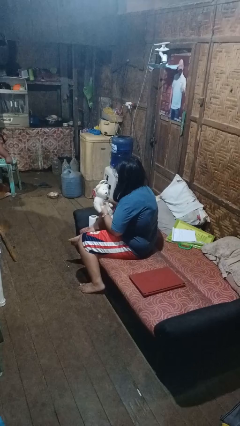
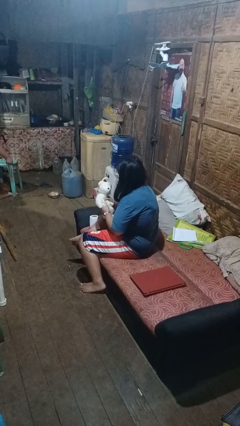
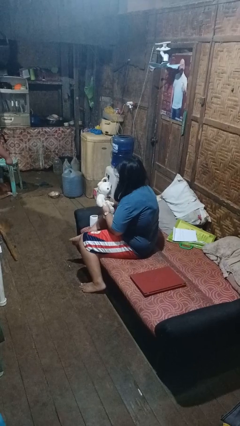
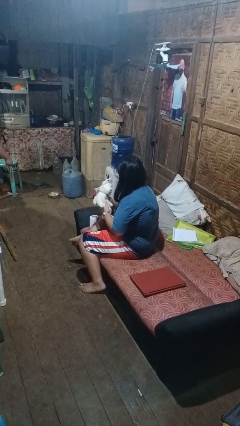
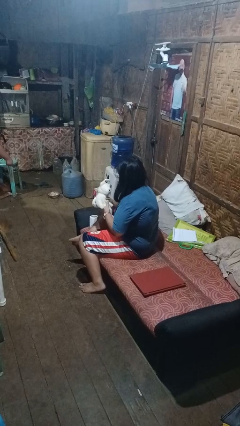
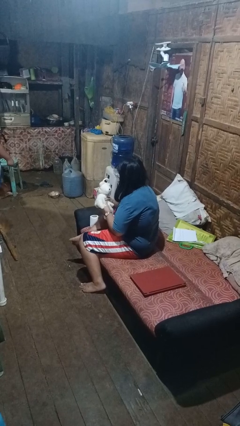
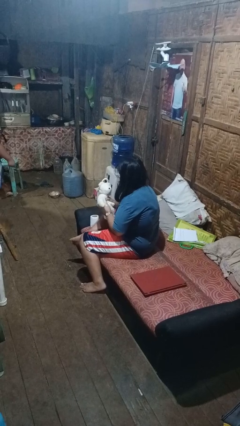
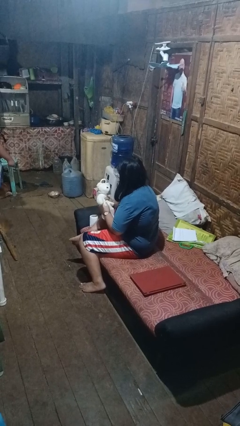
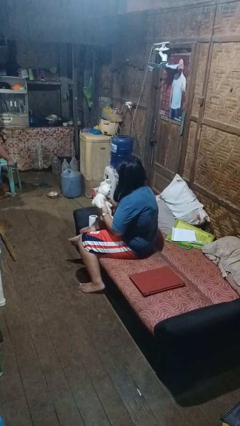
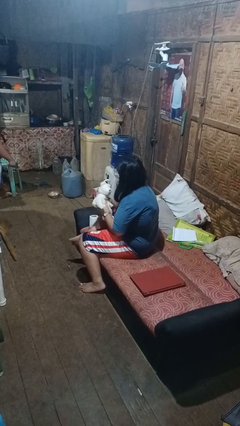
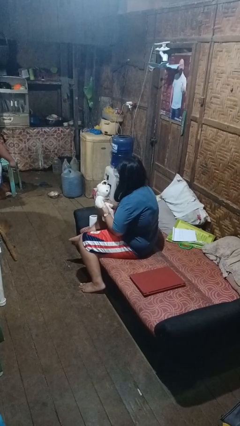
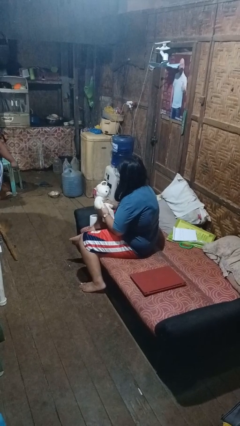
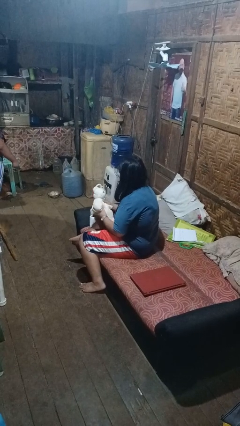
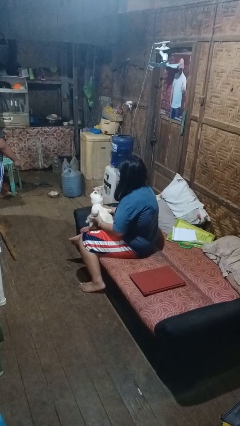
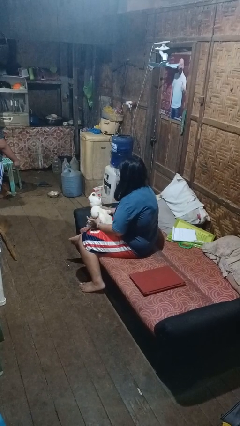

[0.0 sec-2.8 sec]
person squeezes object

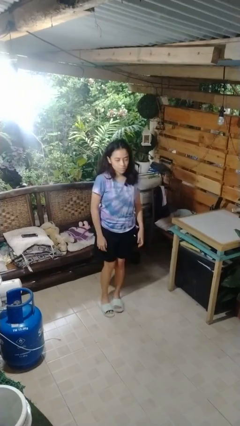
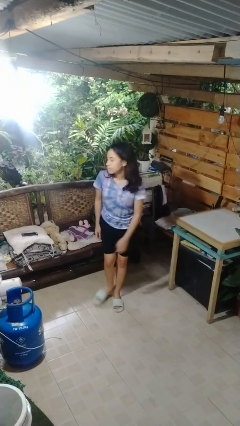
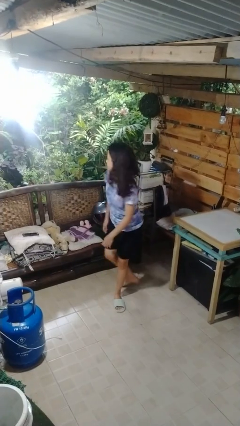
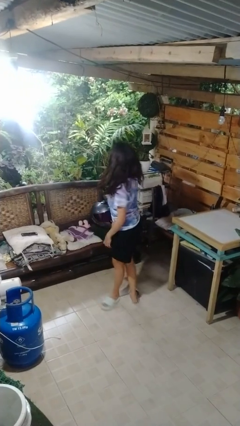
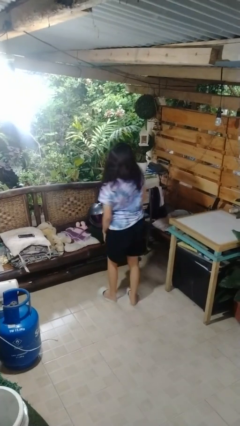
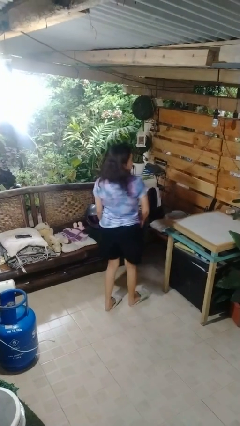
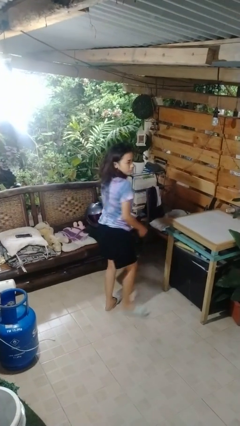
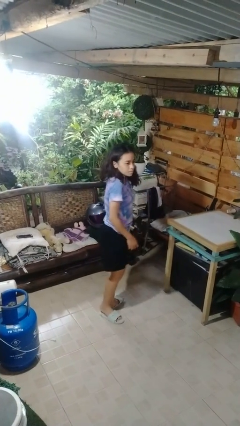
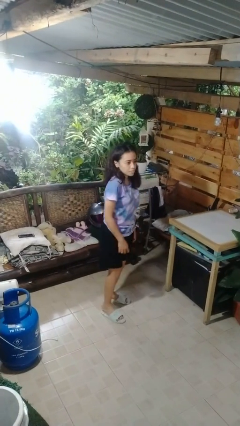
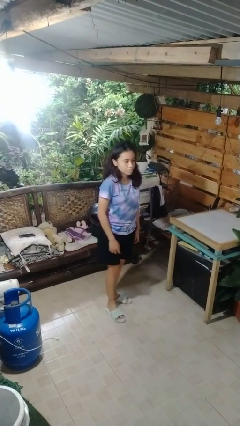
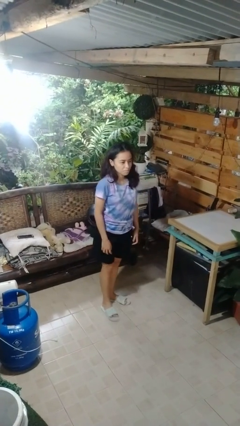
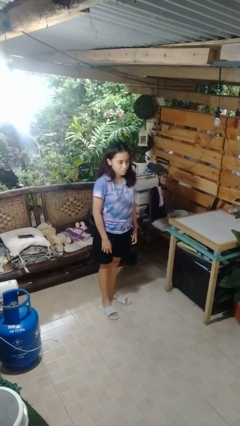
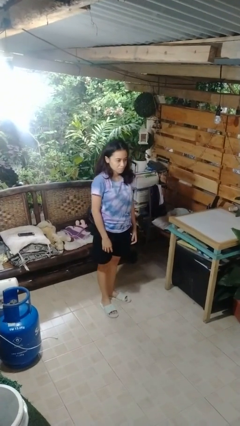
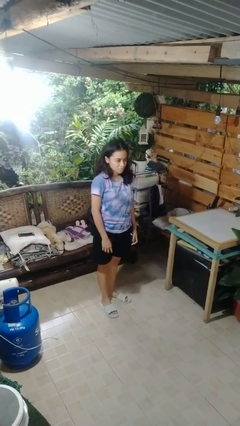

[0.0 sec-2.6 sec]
person twirls

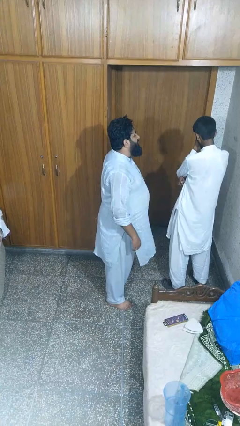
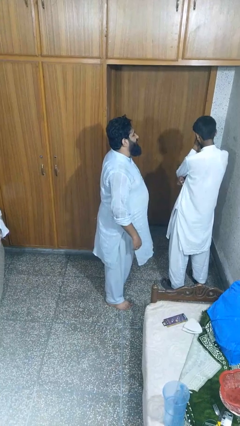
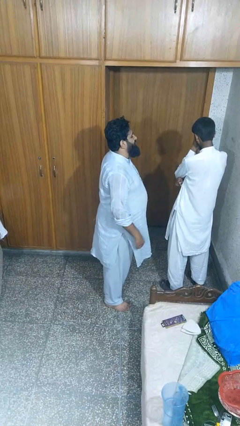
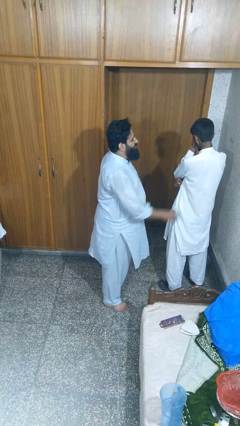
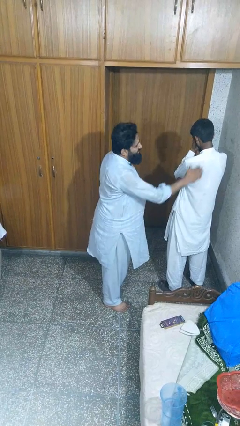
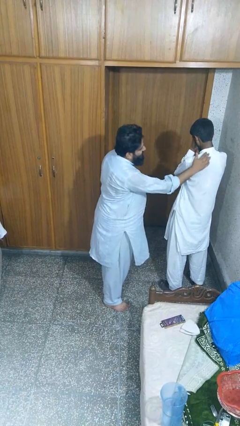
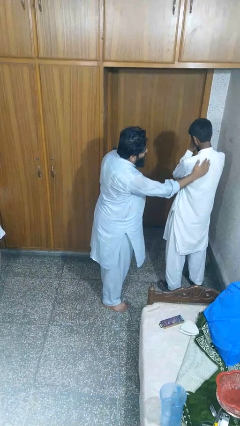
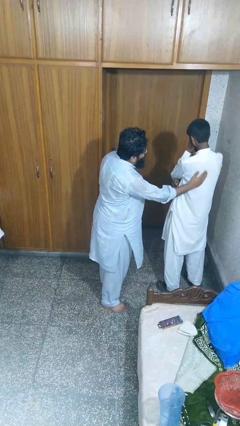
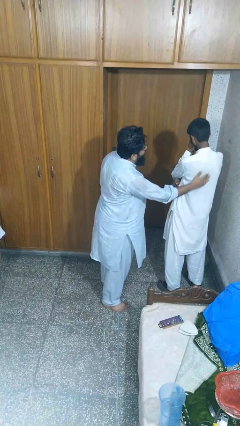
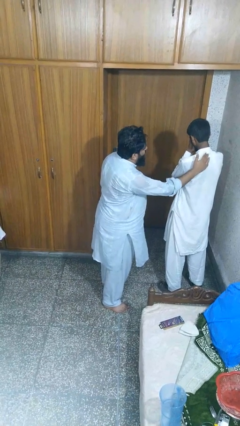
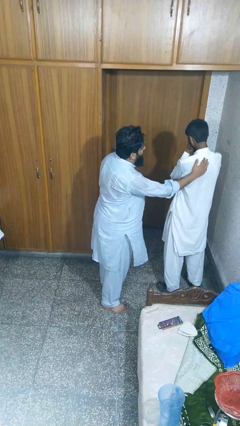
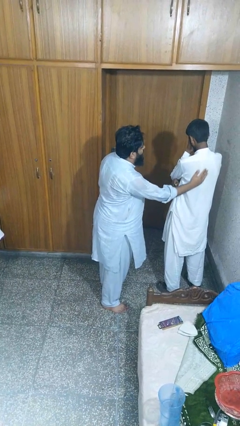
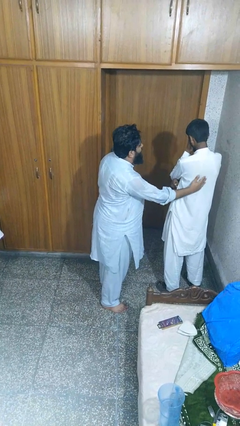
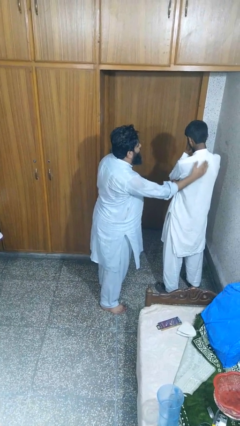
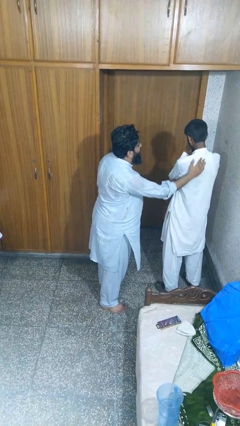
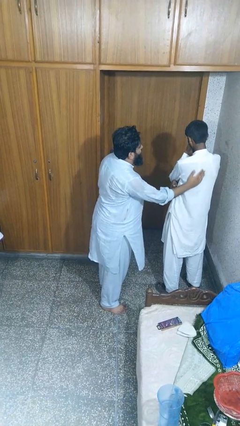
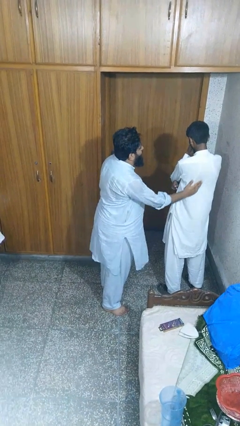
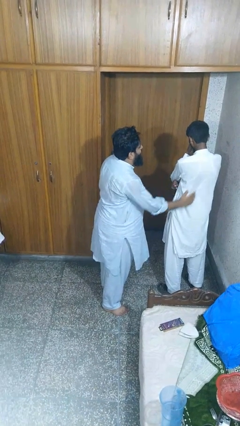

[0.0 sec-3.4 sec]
person touches back of person

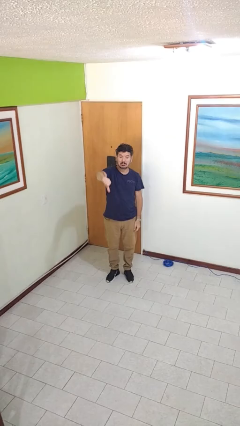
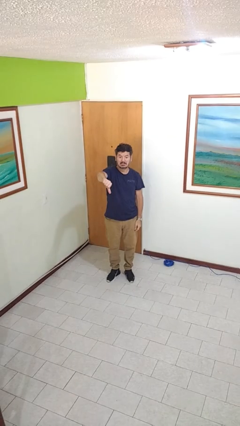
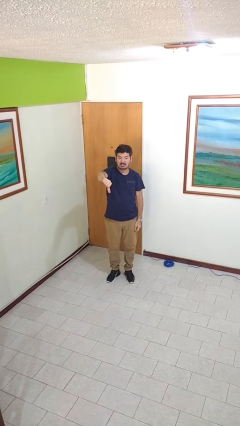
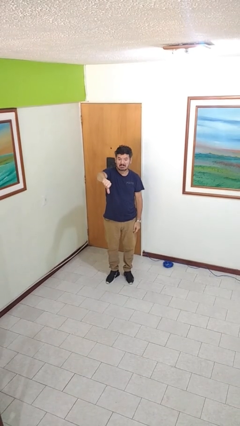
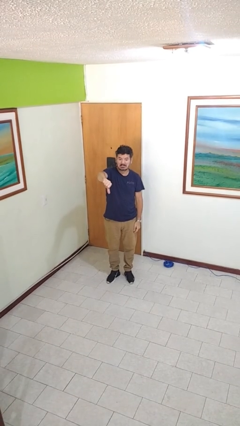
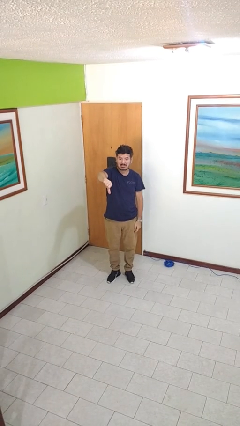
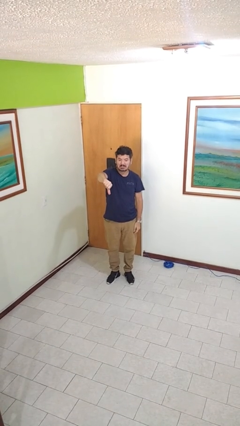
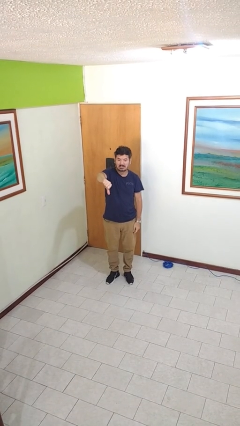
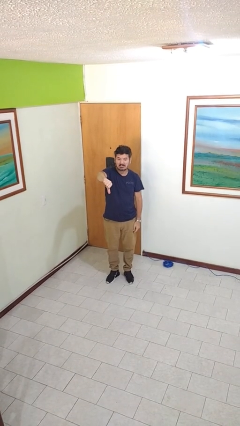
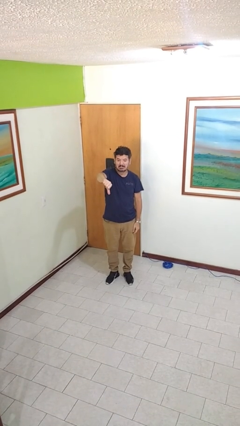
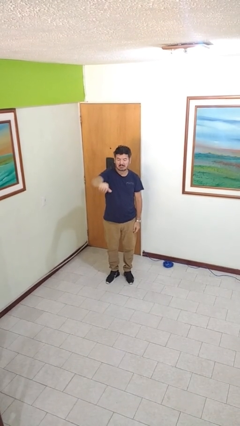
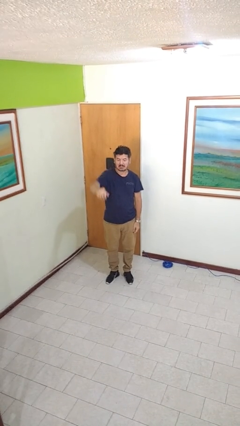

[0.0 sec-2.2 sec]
person gestures thumbs down

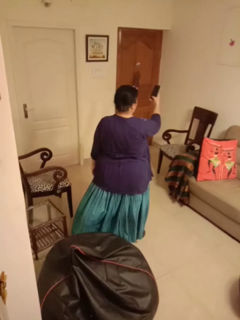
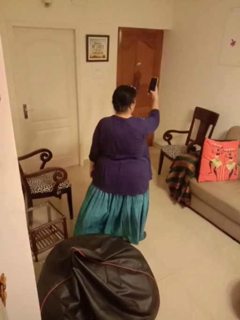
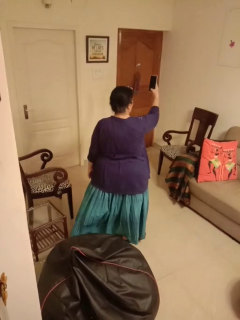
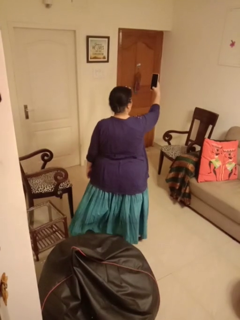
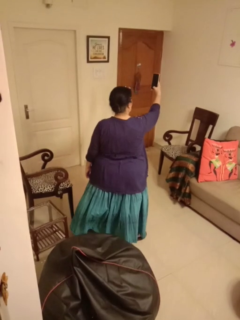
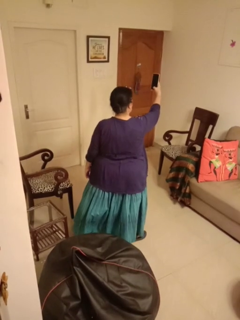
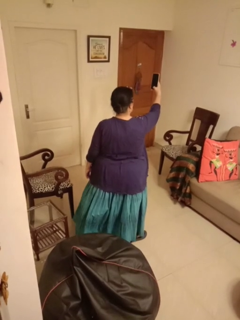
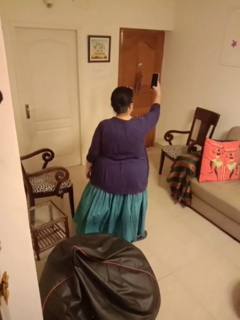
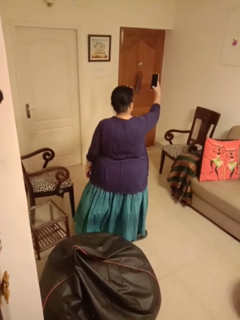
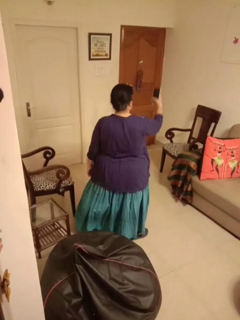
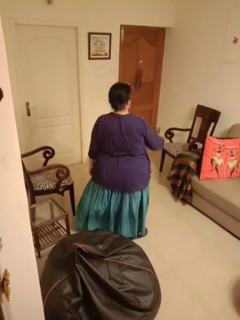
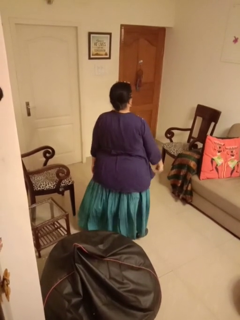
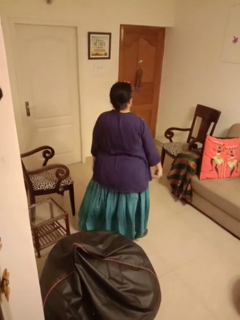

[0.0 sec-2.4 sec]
person takes selfie

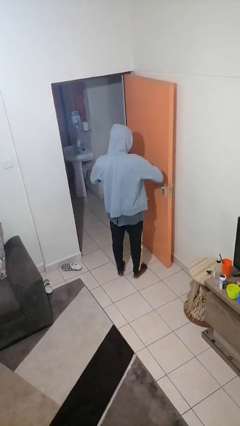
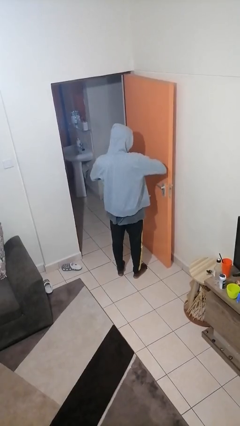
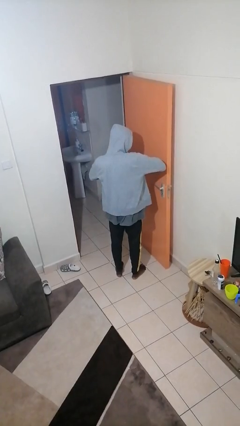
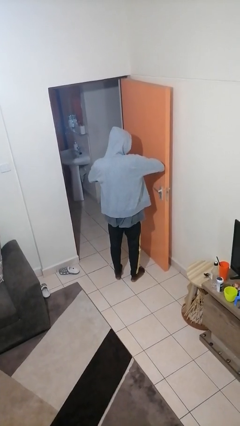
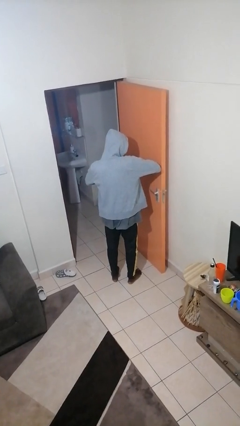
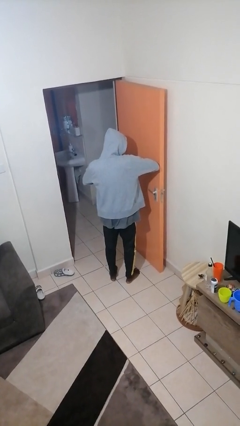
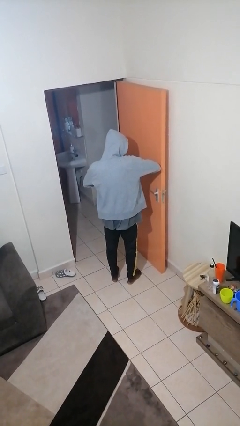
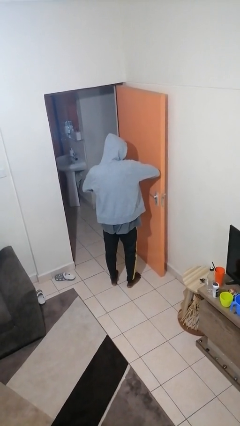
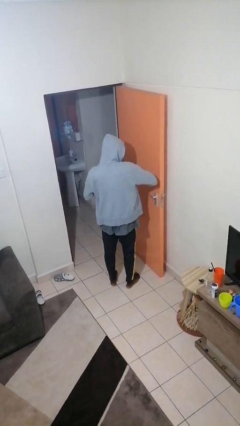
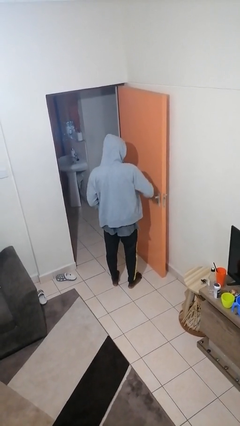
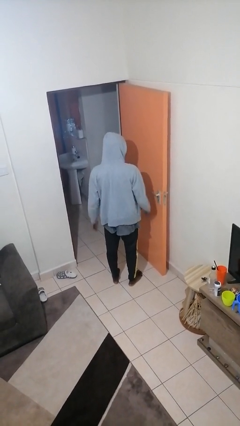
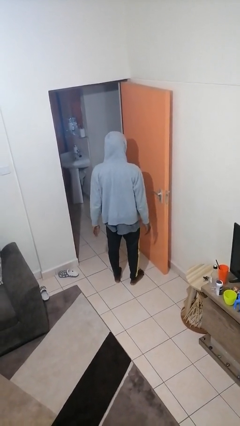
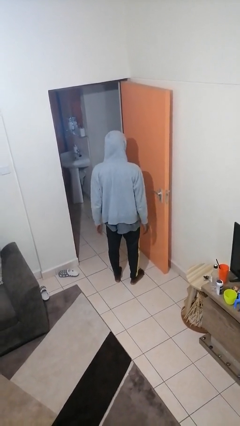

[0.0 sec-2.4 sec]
person puts on ring

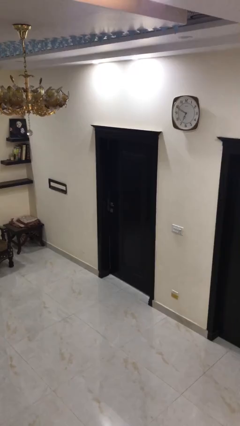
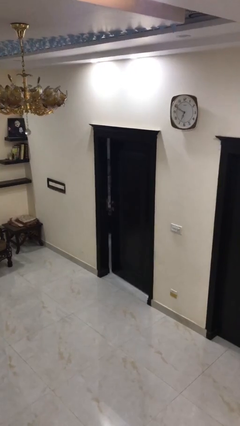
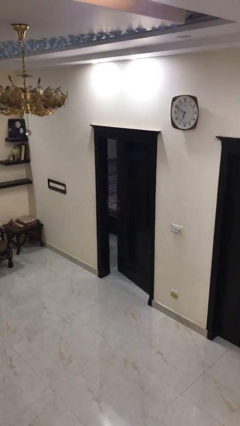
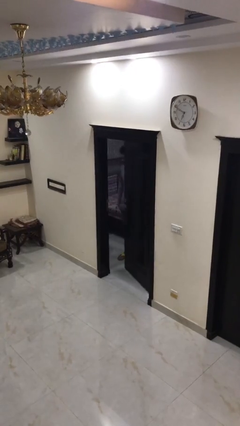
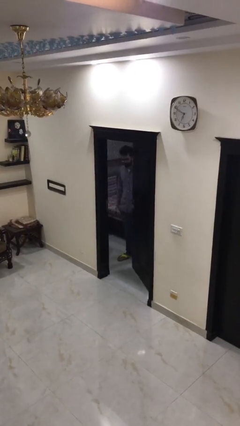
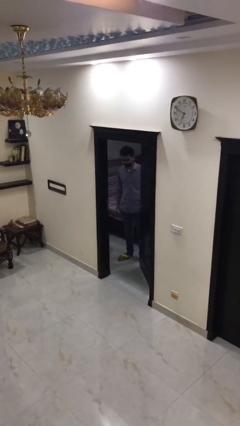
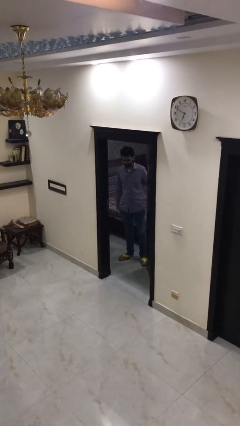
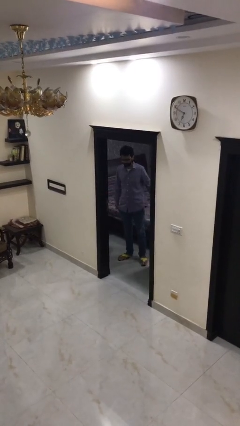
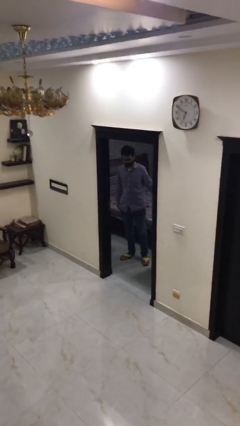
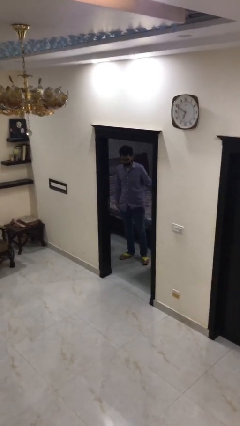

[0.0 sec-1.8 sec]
person opens facility door
